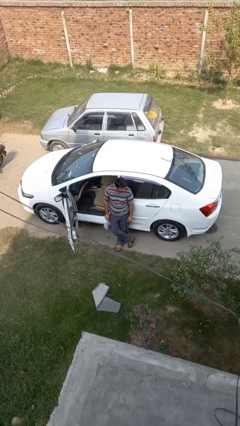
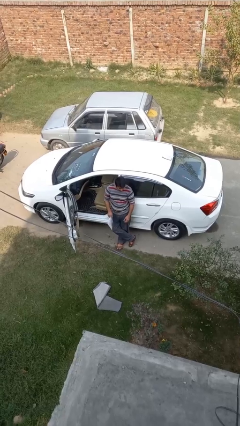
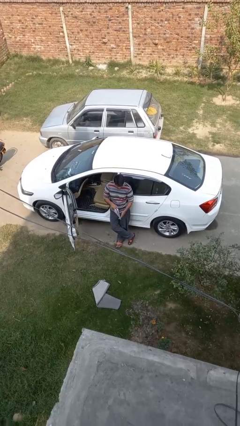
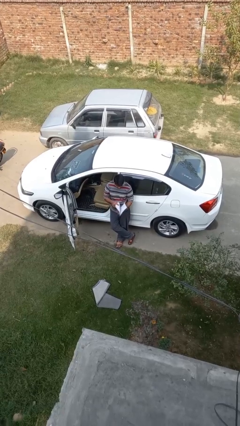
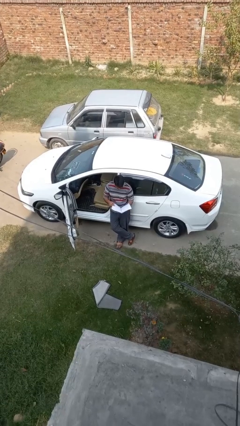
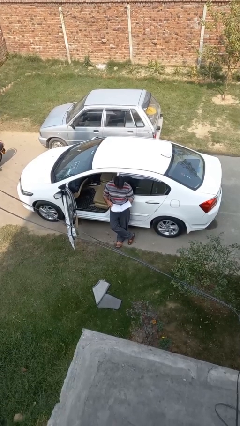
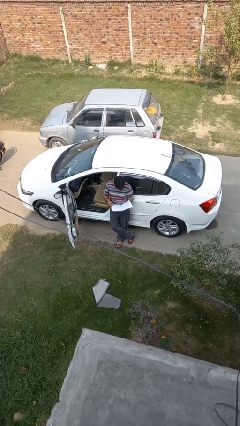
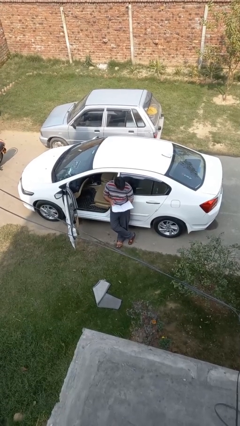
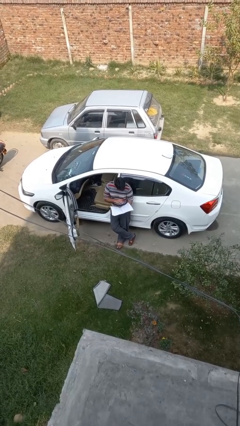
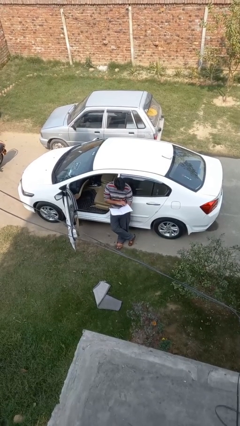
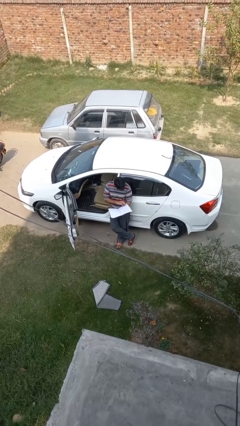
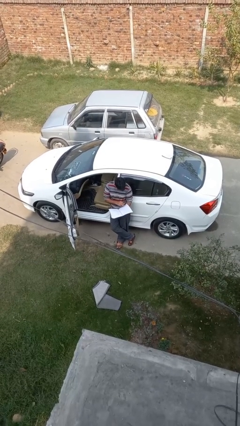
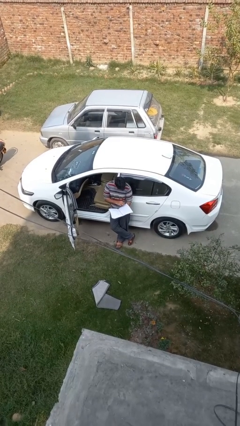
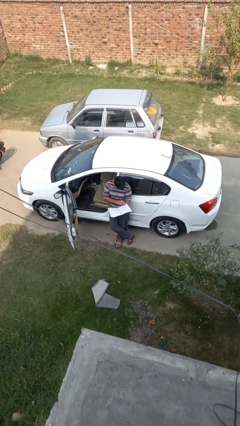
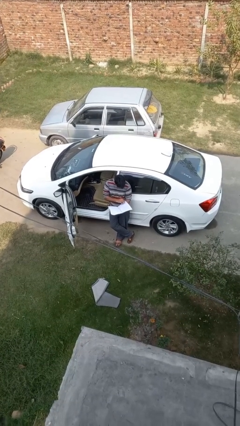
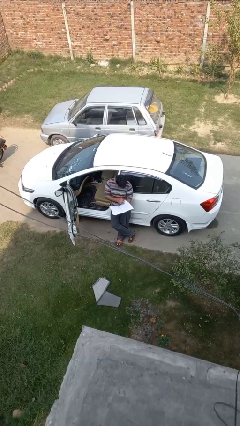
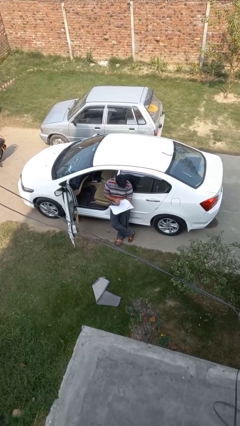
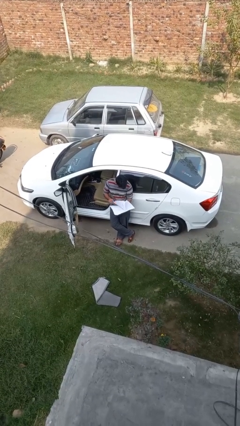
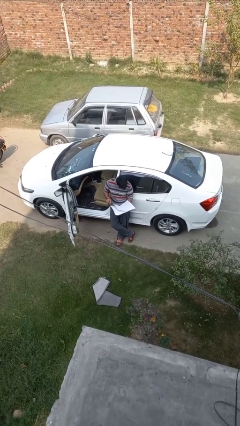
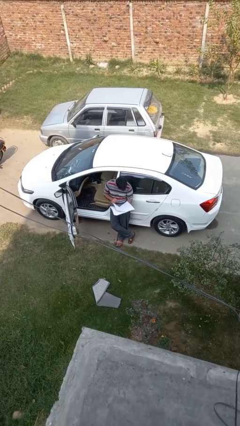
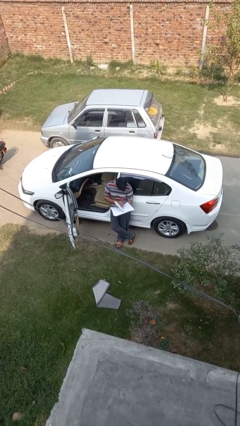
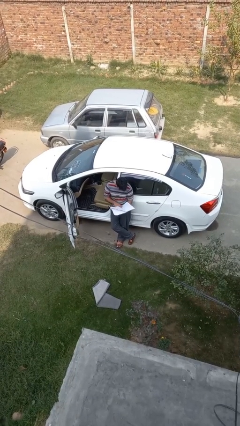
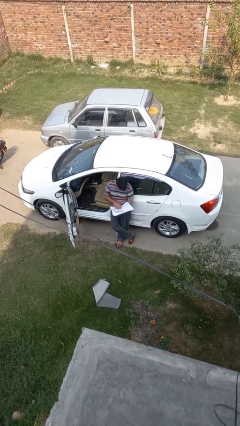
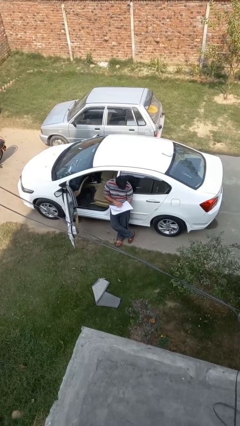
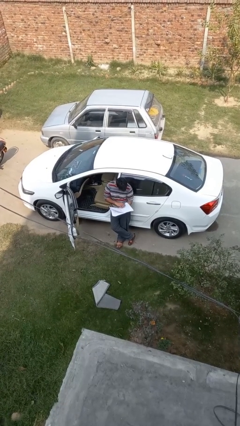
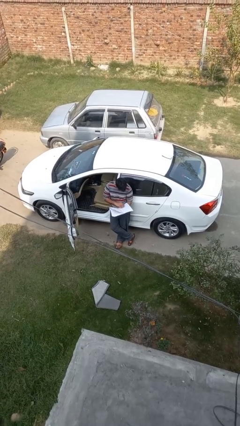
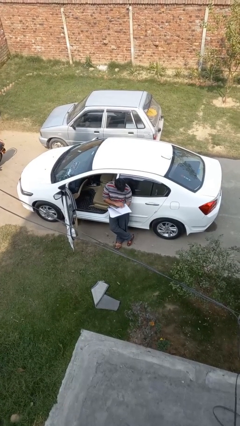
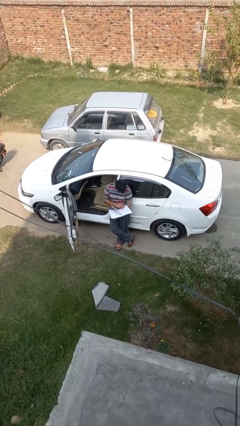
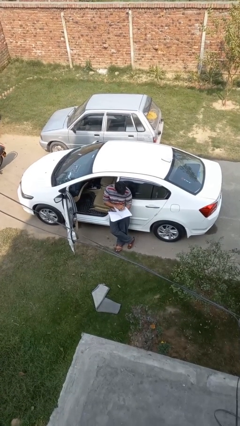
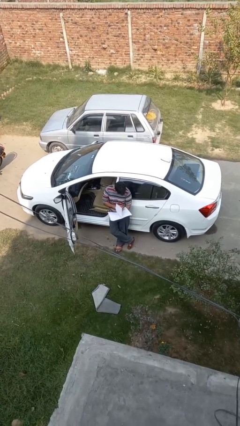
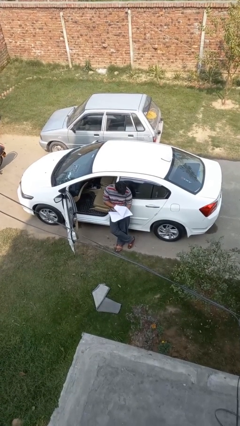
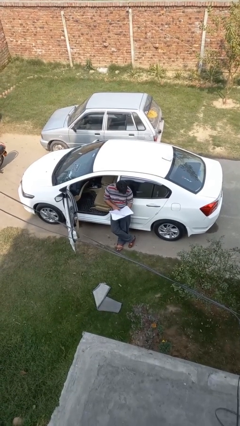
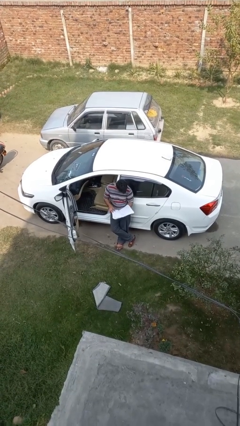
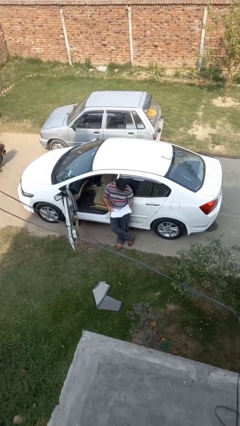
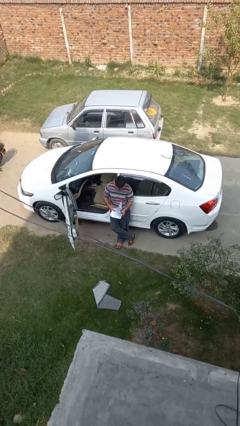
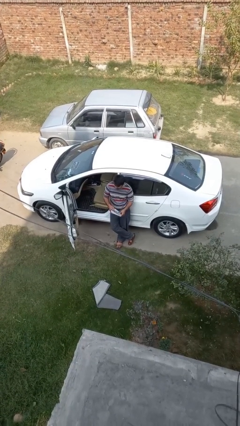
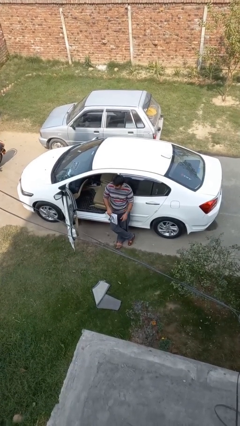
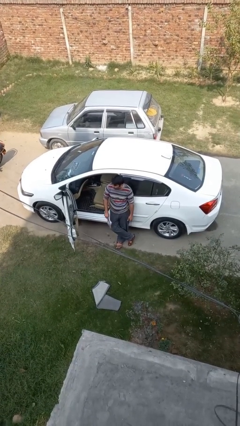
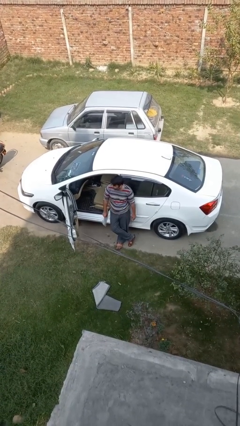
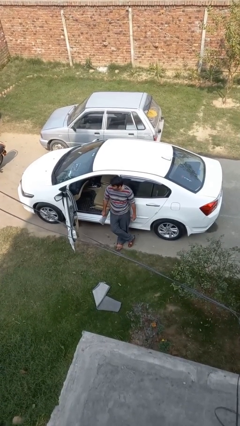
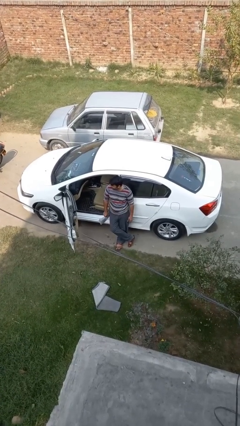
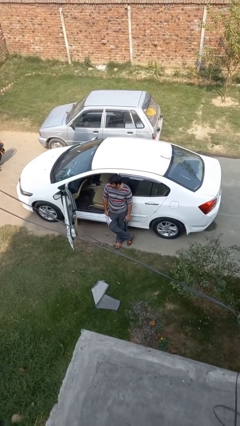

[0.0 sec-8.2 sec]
person reads document

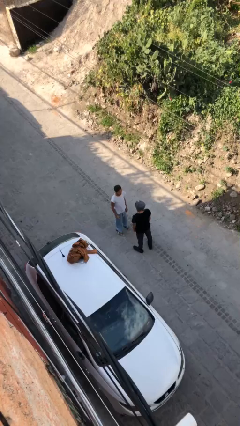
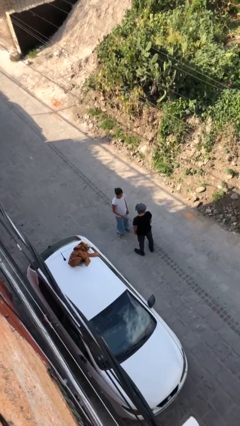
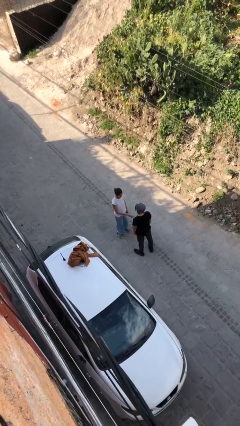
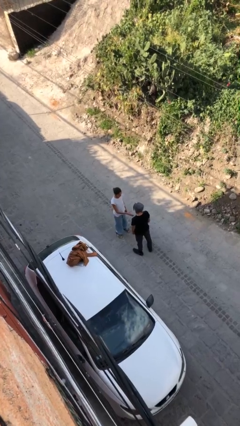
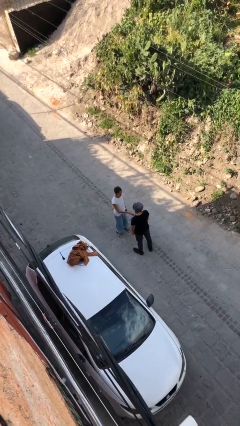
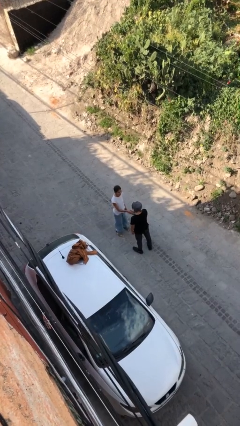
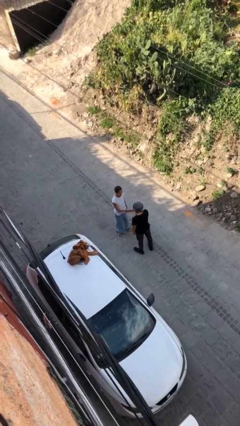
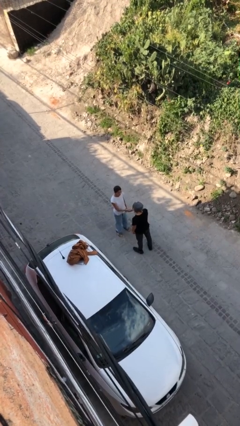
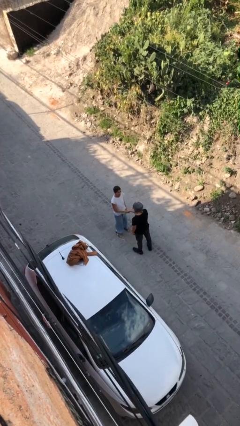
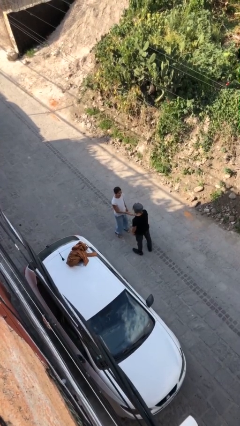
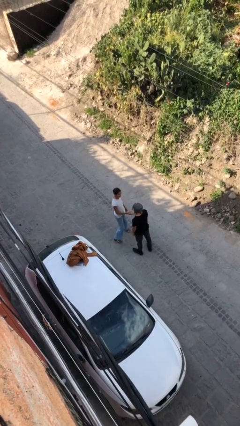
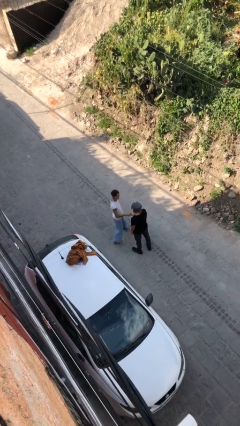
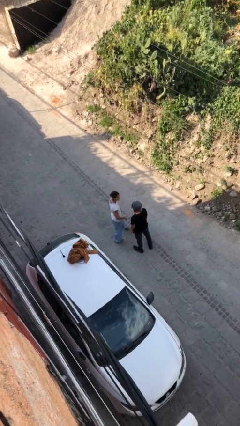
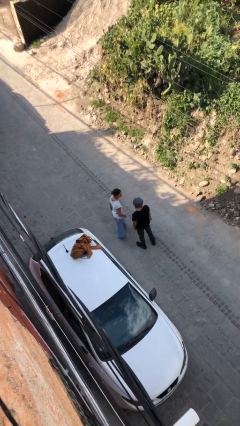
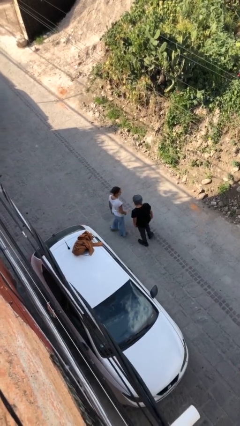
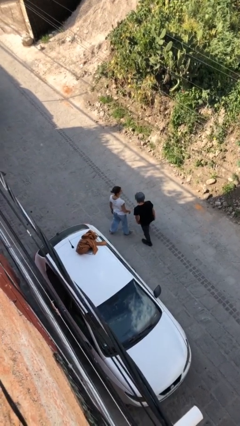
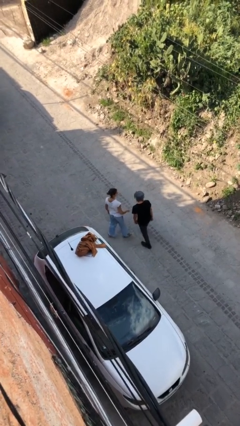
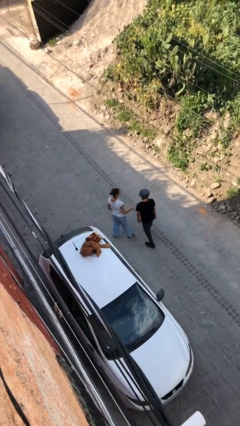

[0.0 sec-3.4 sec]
person shakes hand

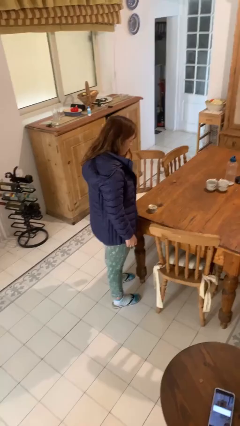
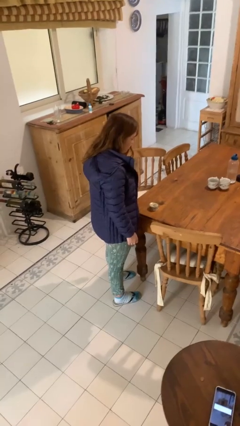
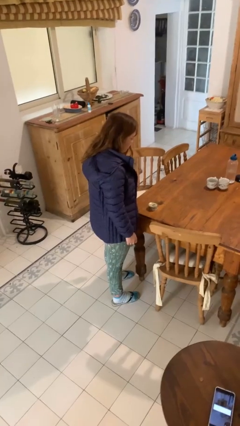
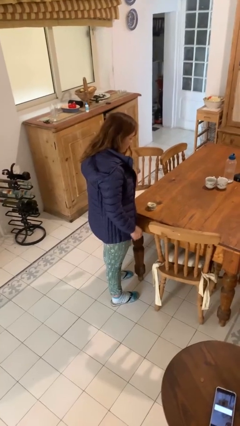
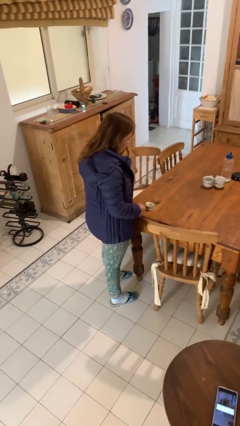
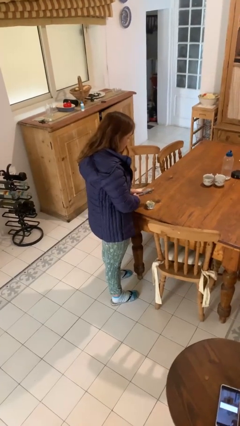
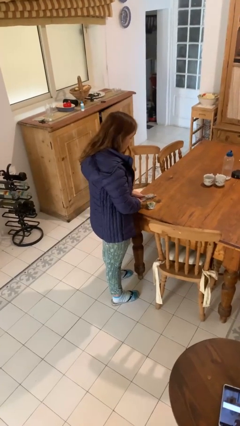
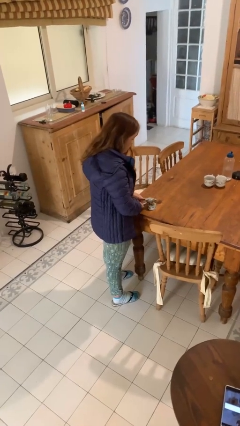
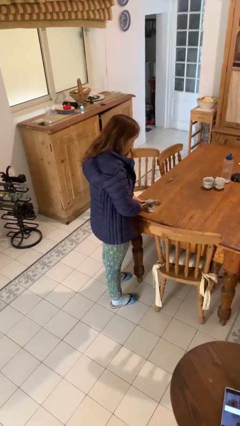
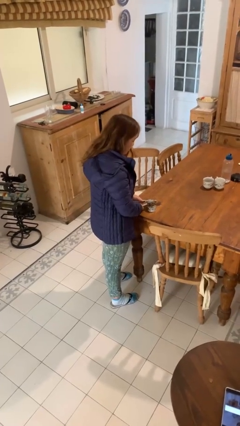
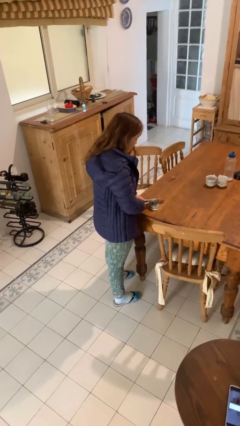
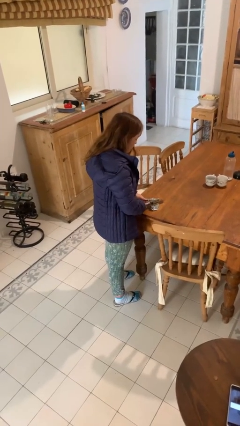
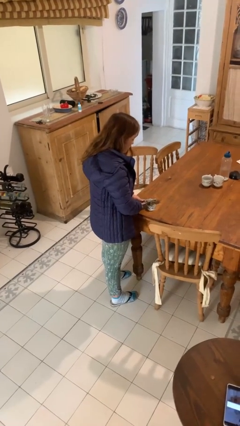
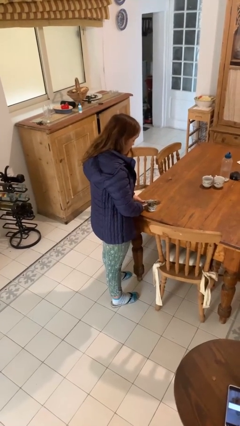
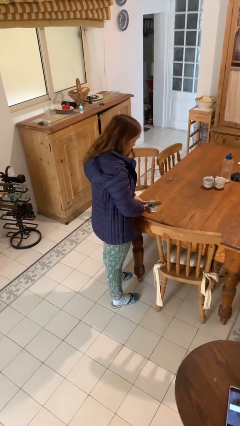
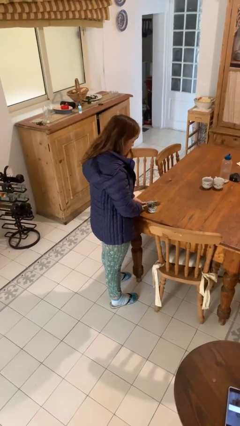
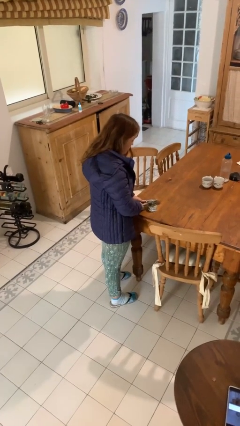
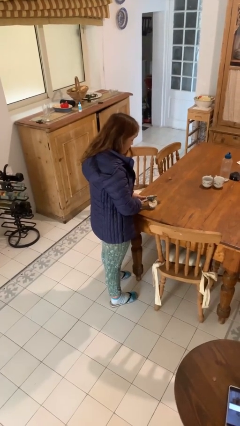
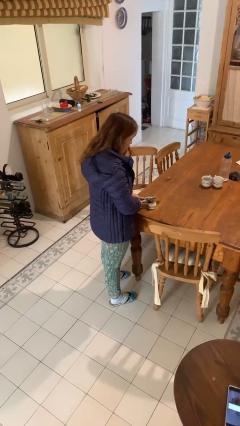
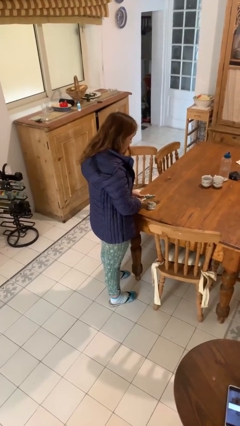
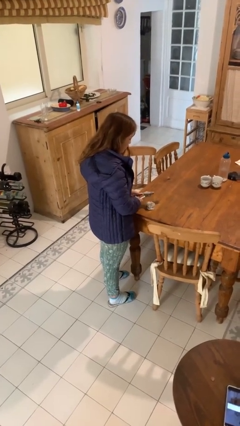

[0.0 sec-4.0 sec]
person opens can with can opener

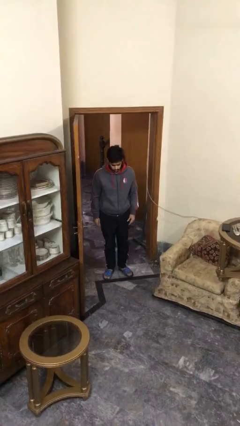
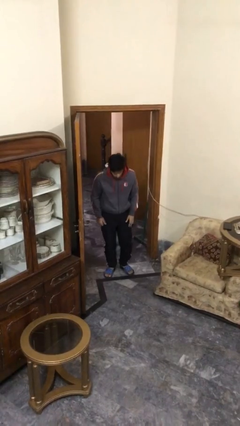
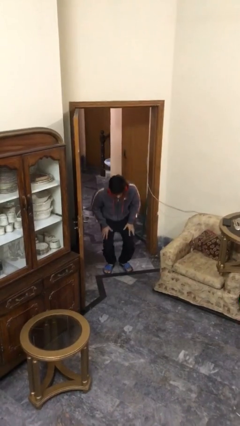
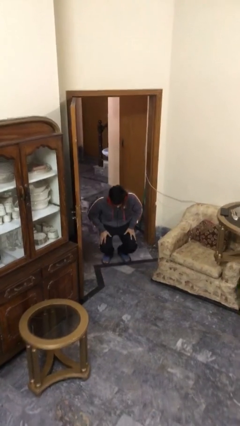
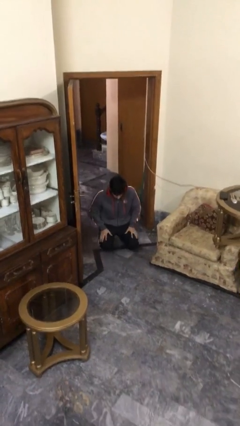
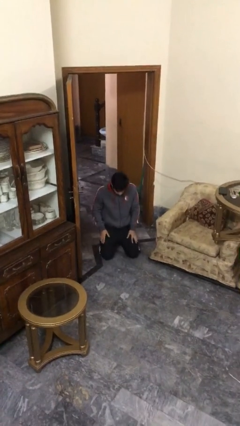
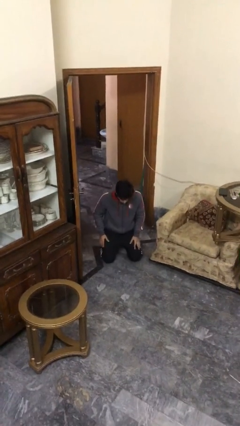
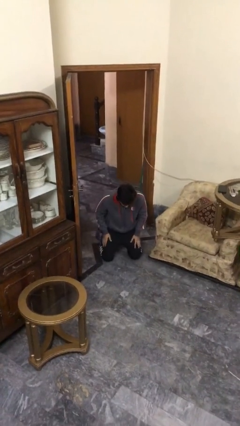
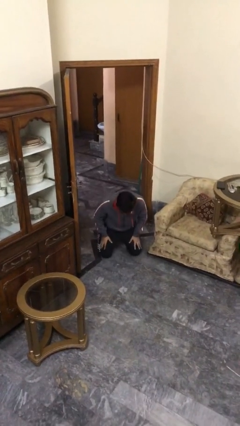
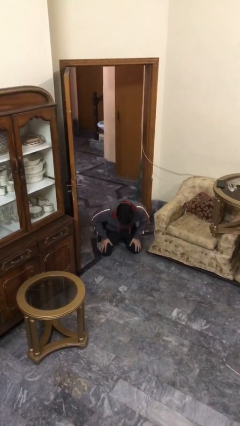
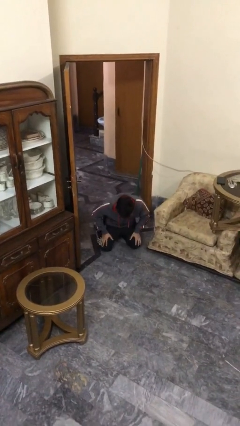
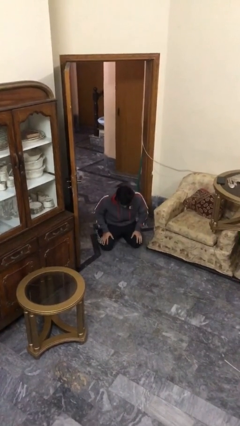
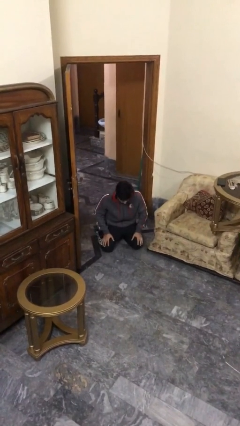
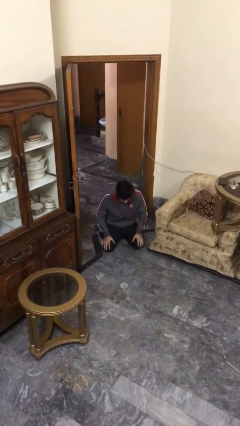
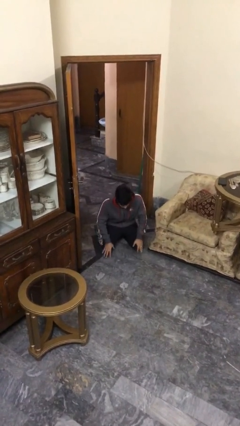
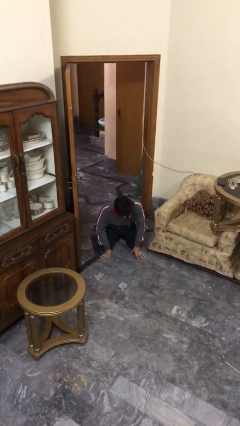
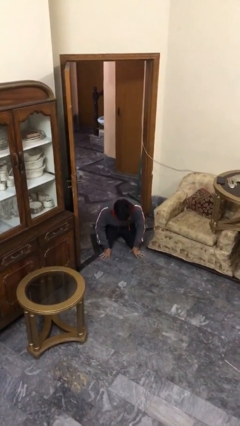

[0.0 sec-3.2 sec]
person sits down
